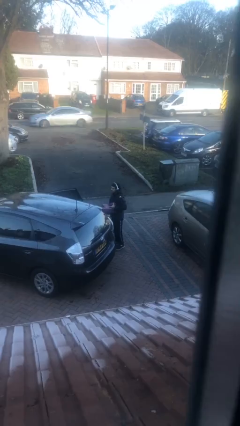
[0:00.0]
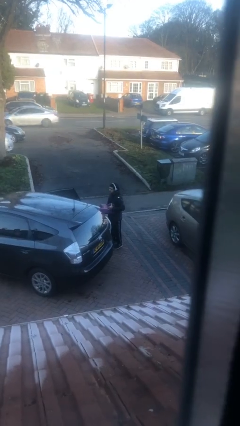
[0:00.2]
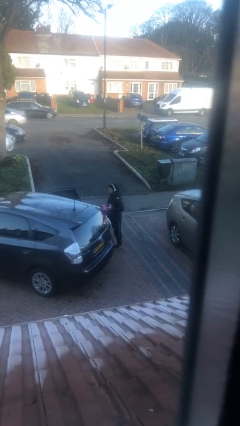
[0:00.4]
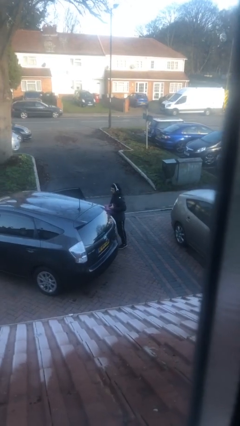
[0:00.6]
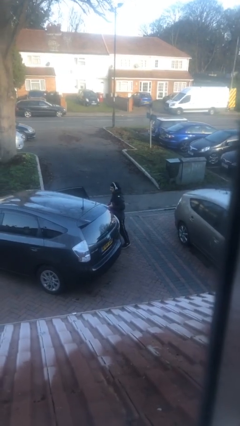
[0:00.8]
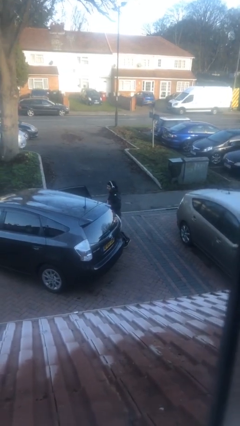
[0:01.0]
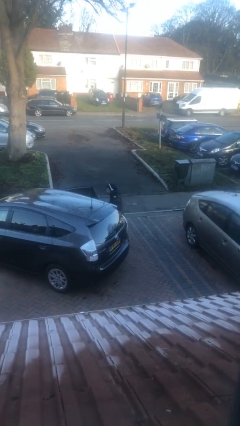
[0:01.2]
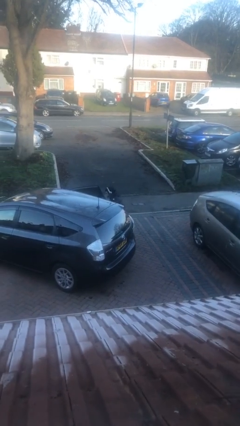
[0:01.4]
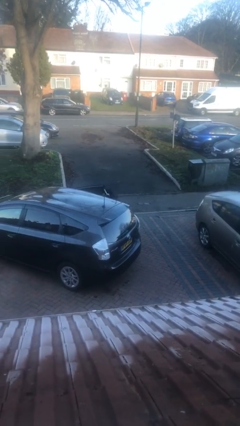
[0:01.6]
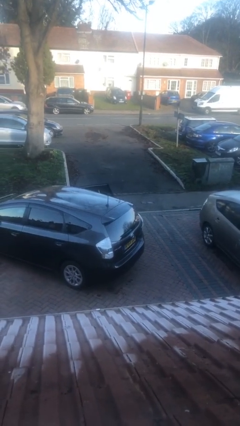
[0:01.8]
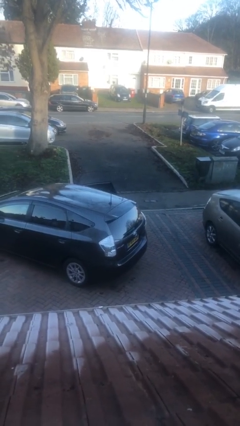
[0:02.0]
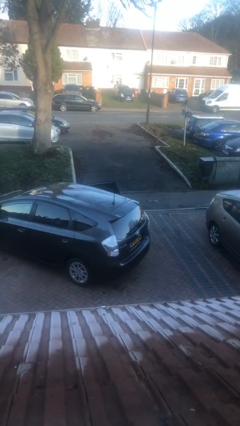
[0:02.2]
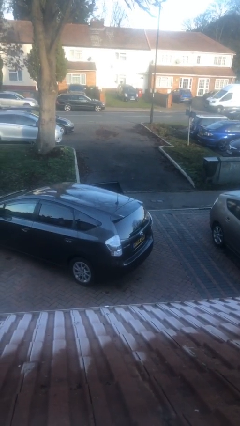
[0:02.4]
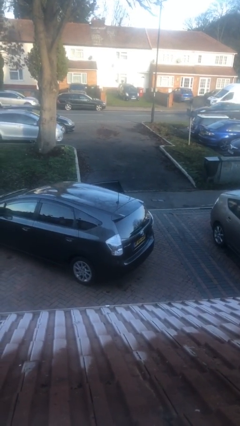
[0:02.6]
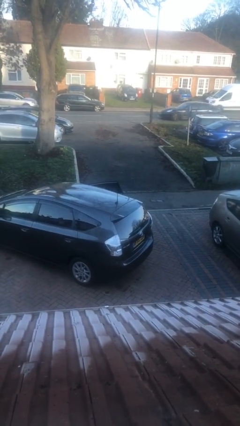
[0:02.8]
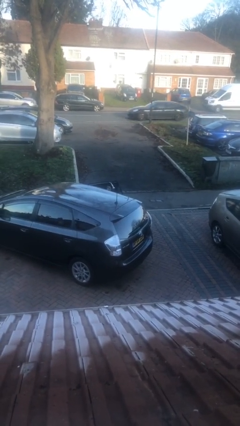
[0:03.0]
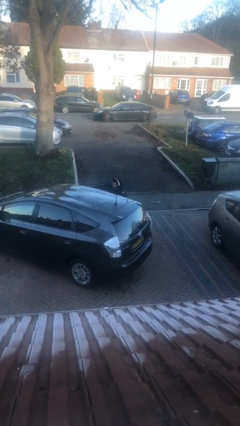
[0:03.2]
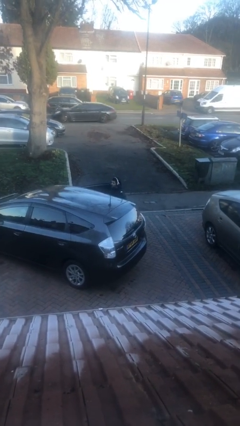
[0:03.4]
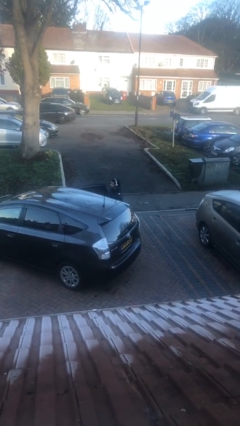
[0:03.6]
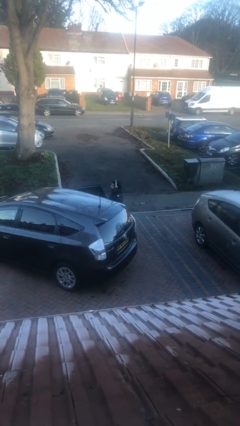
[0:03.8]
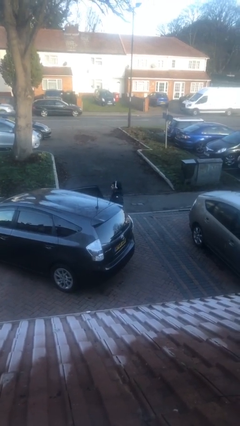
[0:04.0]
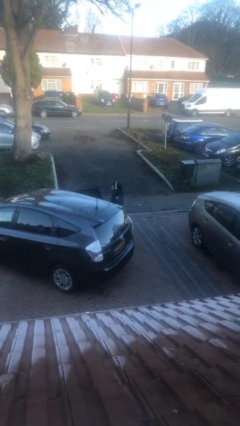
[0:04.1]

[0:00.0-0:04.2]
person loads car

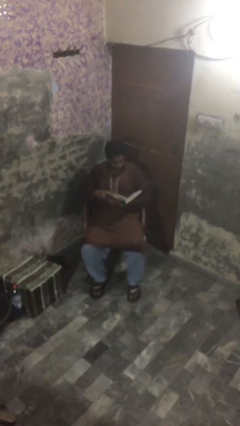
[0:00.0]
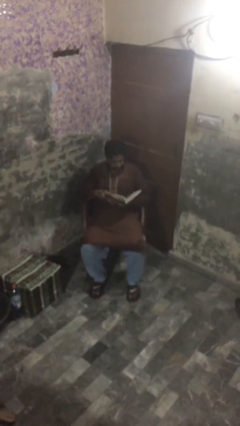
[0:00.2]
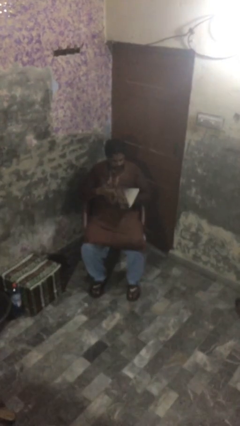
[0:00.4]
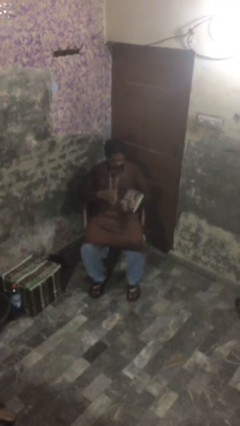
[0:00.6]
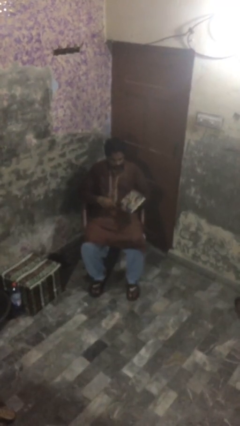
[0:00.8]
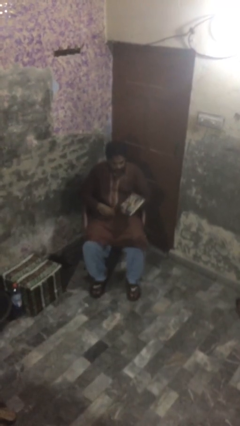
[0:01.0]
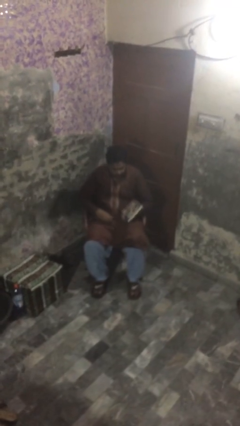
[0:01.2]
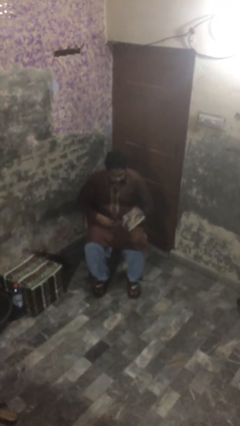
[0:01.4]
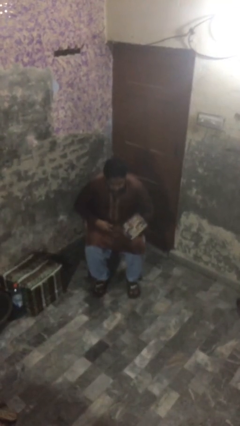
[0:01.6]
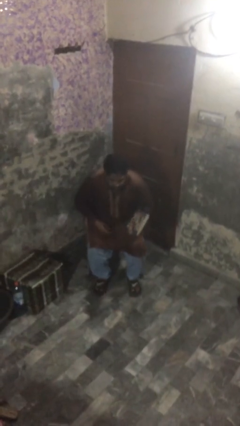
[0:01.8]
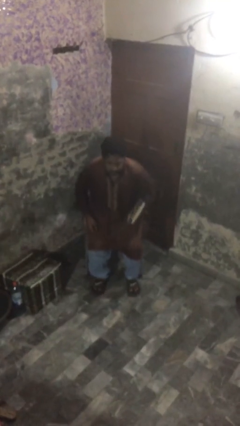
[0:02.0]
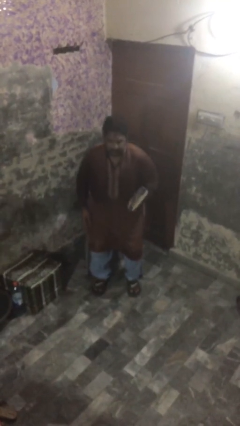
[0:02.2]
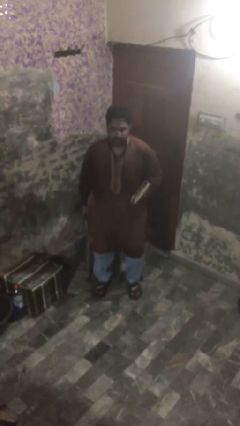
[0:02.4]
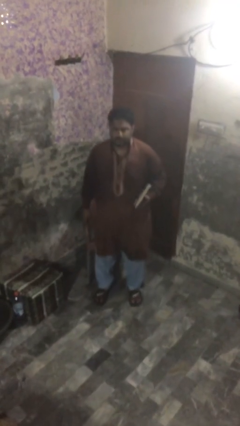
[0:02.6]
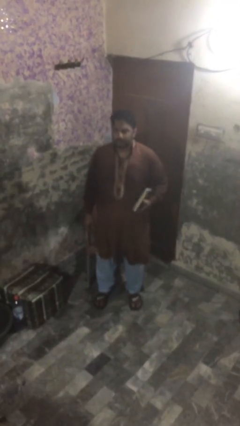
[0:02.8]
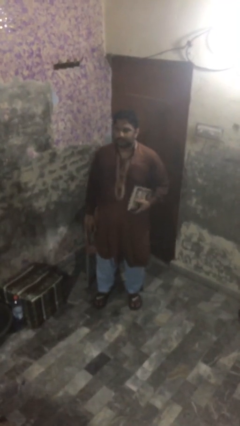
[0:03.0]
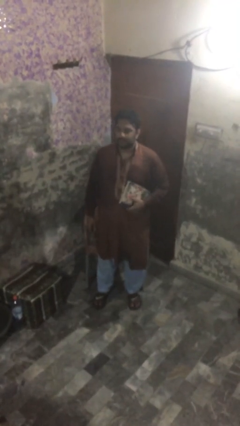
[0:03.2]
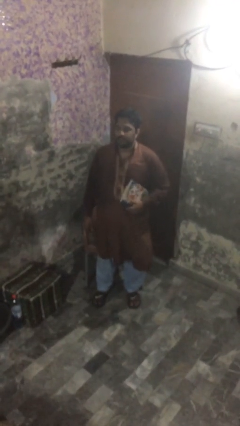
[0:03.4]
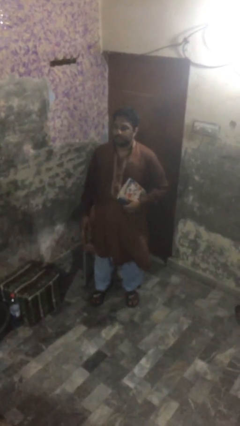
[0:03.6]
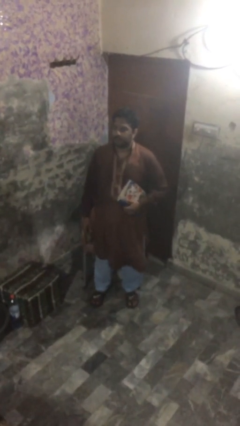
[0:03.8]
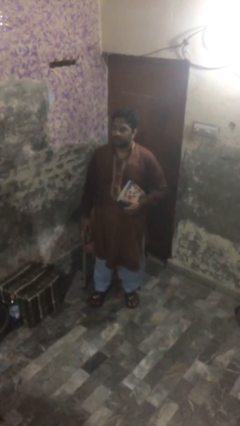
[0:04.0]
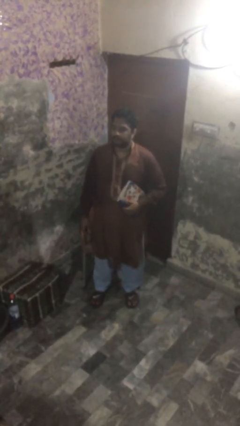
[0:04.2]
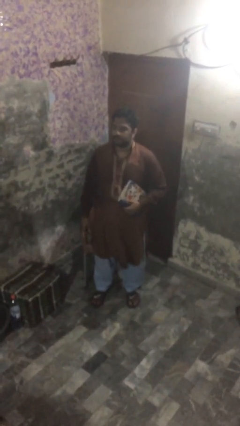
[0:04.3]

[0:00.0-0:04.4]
person stands up

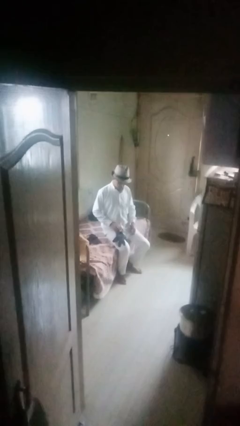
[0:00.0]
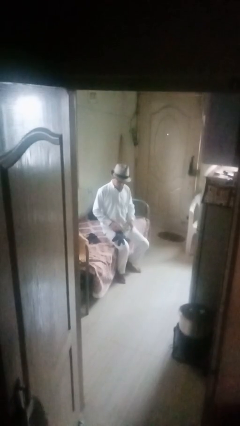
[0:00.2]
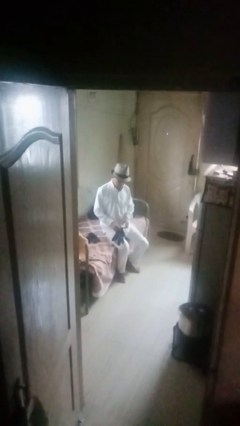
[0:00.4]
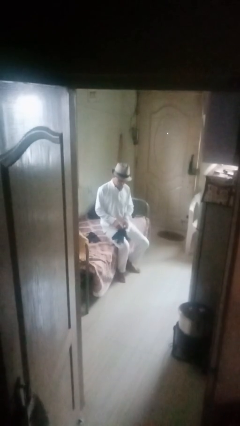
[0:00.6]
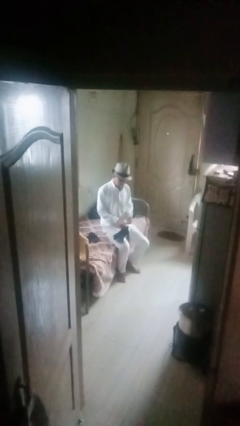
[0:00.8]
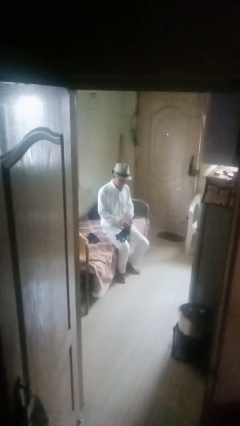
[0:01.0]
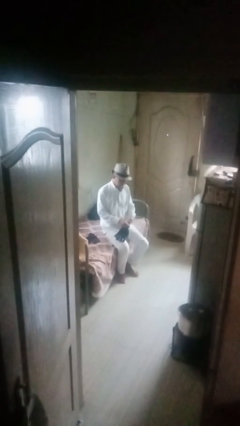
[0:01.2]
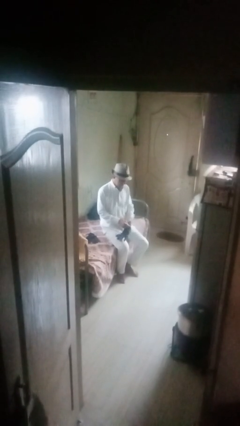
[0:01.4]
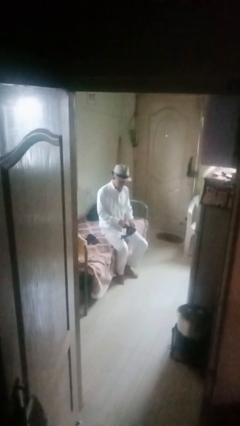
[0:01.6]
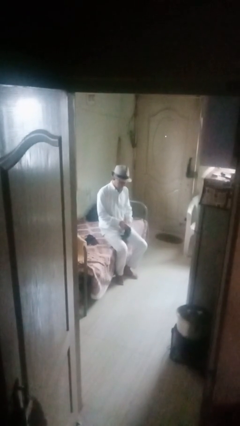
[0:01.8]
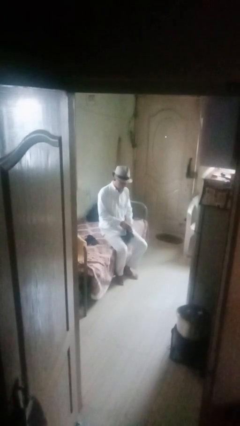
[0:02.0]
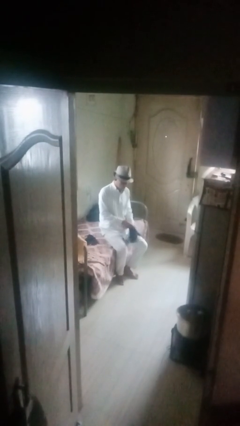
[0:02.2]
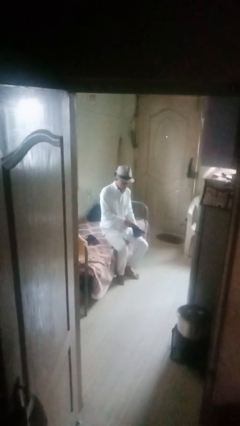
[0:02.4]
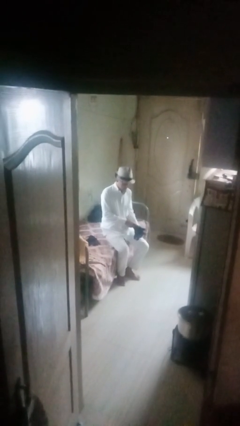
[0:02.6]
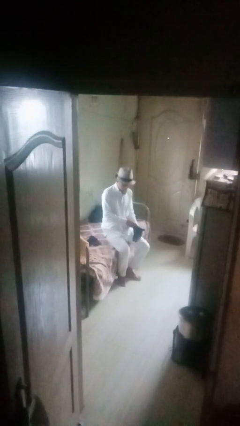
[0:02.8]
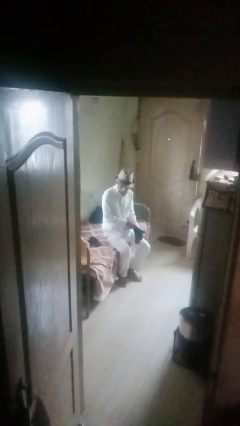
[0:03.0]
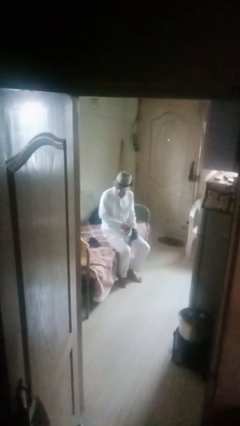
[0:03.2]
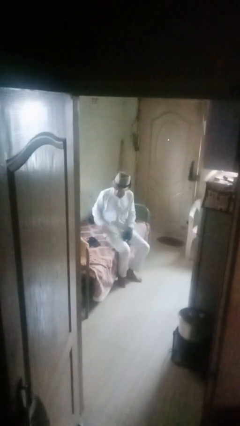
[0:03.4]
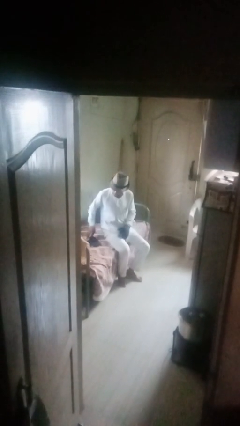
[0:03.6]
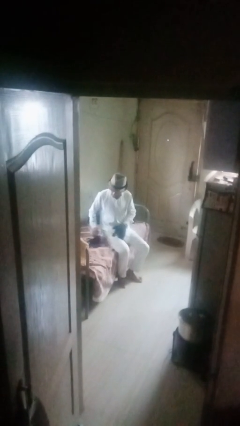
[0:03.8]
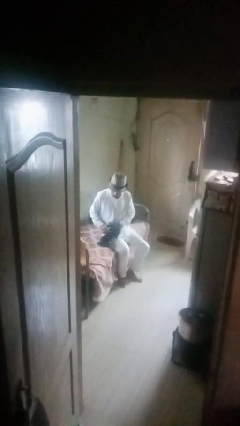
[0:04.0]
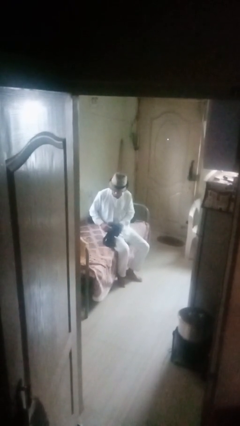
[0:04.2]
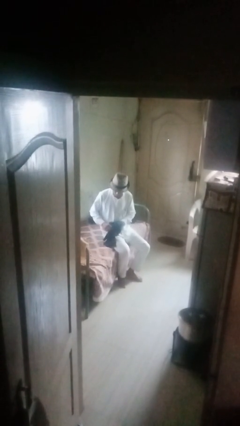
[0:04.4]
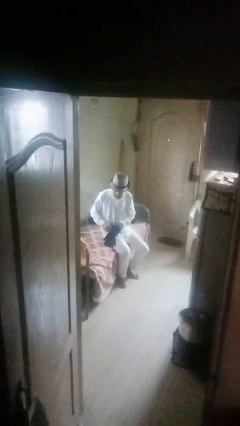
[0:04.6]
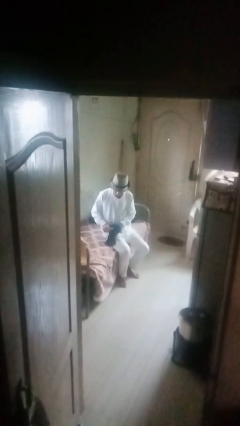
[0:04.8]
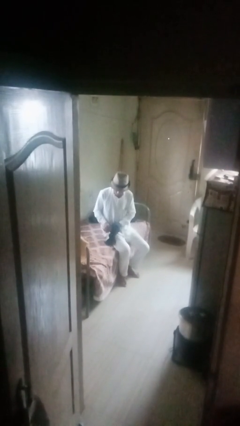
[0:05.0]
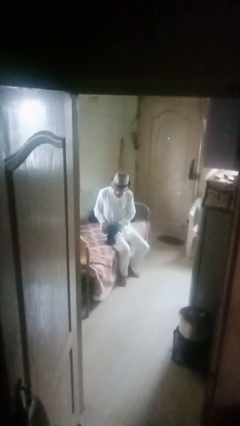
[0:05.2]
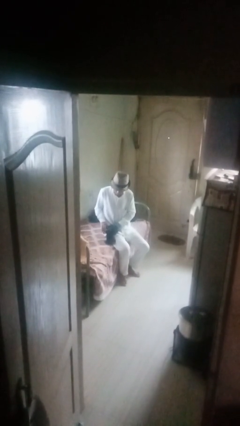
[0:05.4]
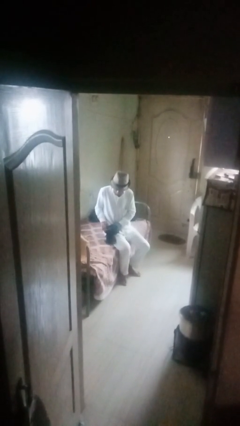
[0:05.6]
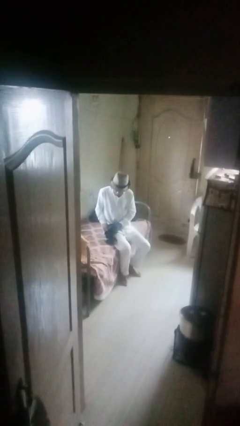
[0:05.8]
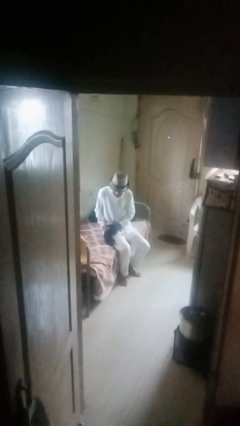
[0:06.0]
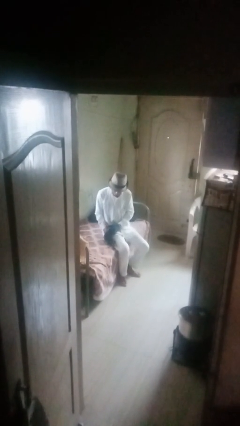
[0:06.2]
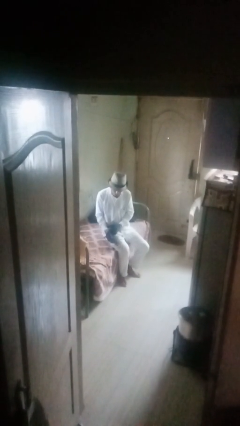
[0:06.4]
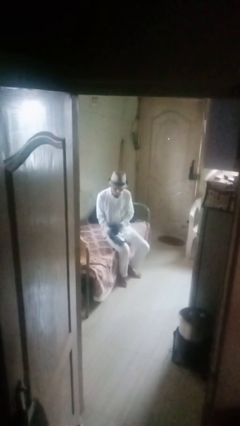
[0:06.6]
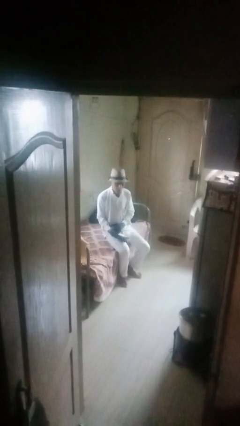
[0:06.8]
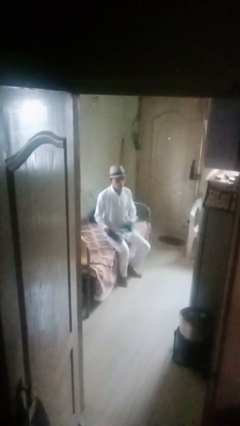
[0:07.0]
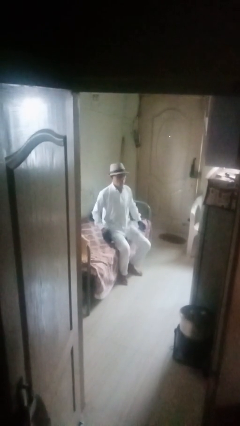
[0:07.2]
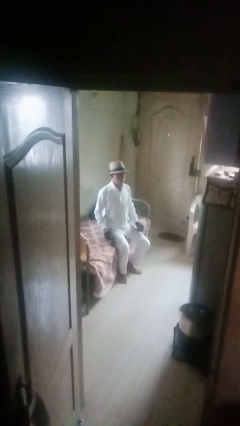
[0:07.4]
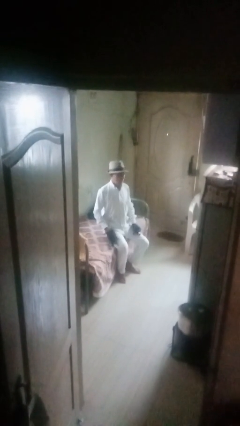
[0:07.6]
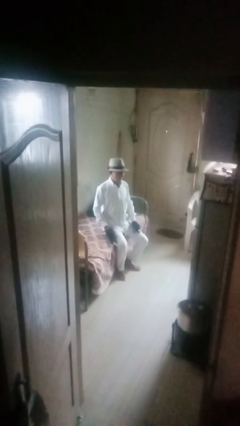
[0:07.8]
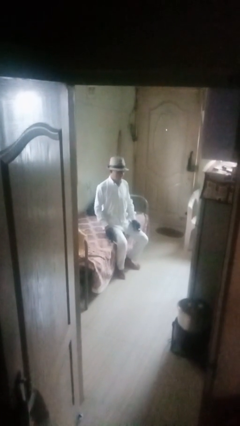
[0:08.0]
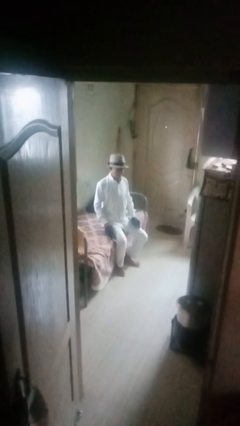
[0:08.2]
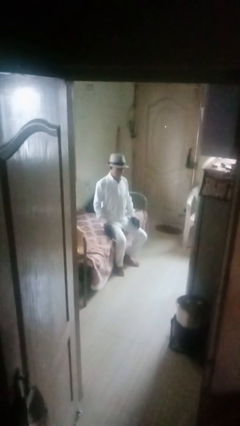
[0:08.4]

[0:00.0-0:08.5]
person puts on gloves

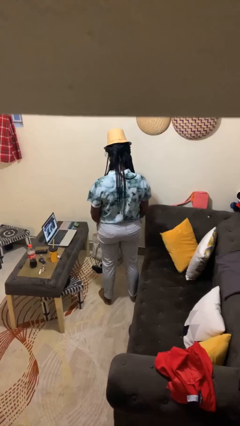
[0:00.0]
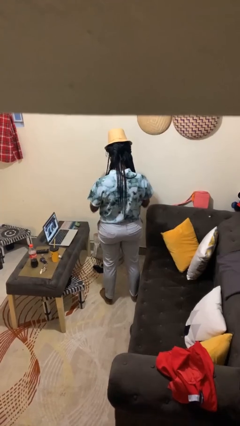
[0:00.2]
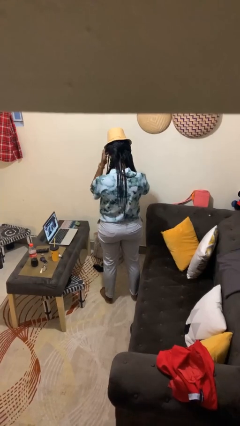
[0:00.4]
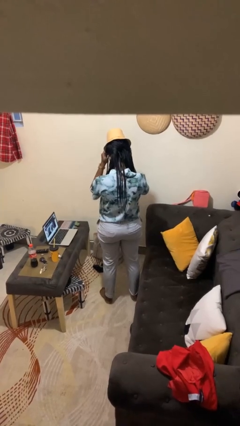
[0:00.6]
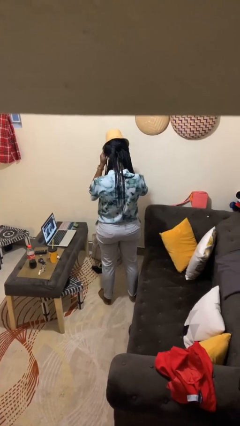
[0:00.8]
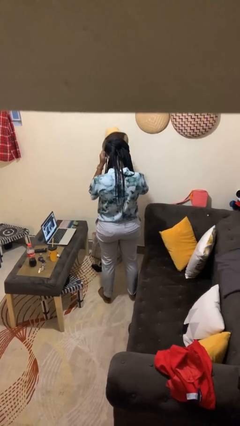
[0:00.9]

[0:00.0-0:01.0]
person takes off hat
